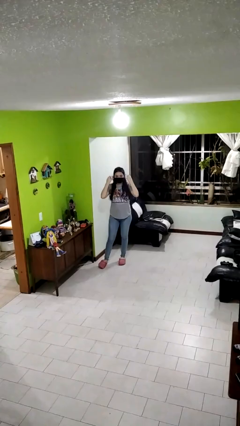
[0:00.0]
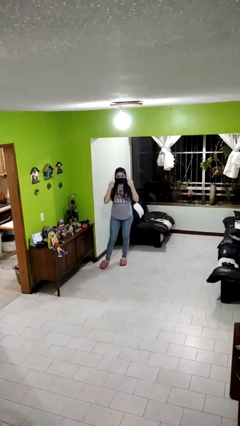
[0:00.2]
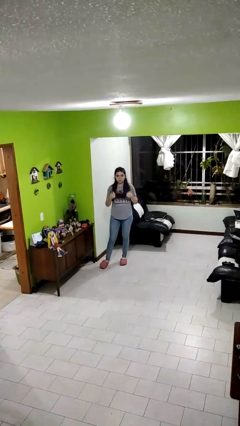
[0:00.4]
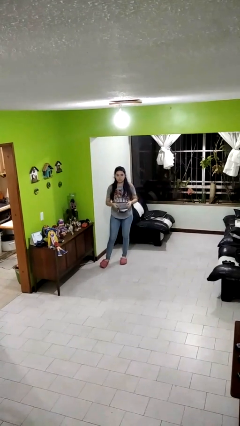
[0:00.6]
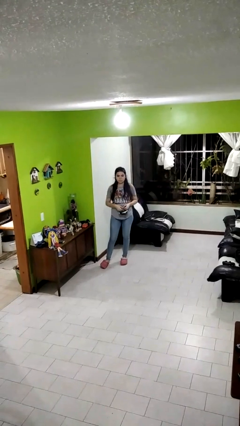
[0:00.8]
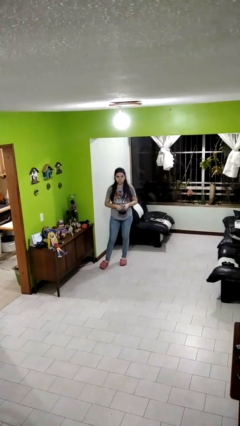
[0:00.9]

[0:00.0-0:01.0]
person takes off facemask

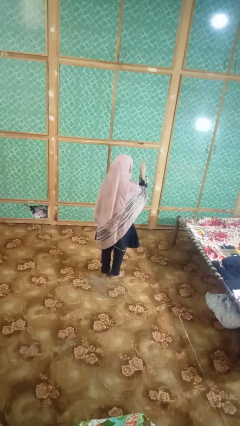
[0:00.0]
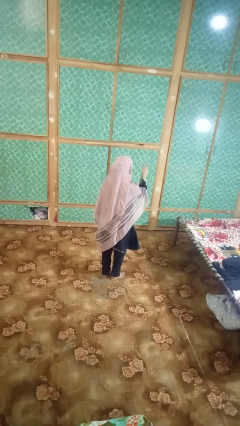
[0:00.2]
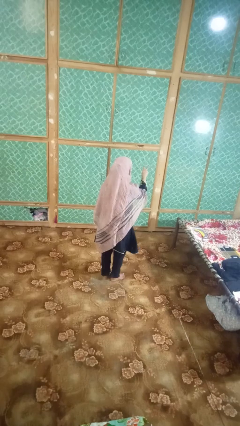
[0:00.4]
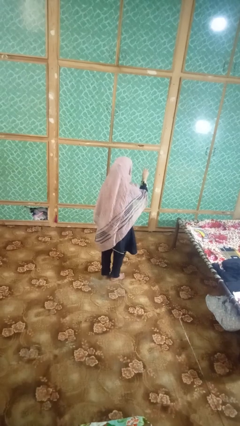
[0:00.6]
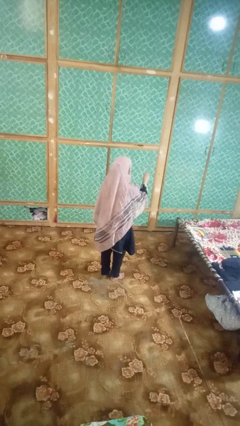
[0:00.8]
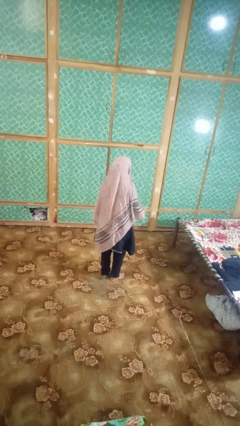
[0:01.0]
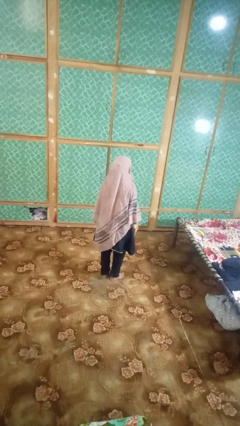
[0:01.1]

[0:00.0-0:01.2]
person gestures behind me

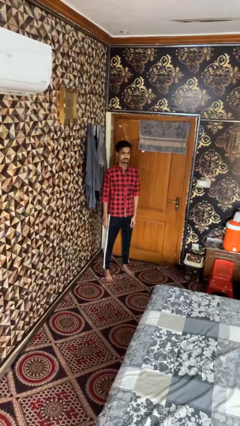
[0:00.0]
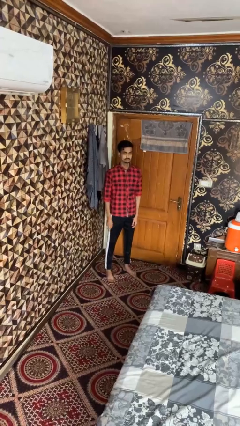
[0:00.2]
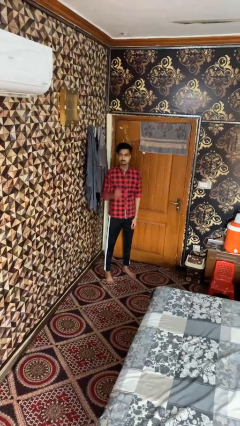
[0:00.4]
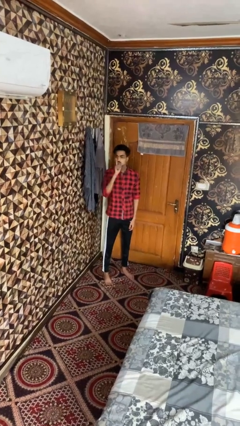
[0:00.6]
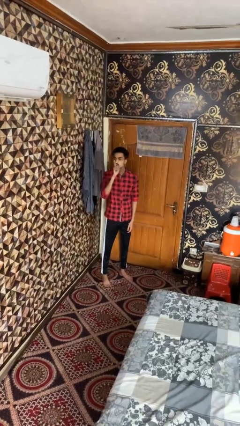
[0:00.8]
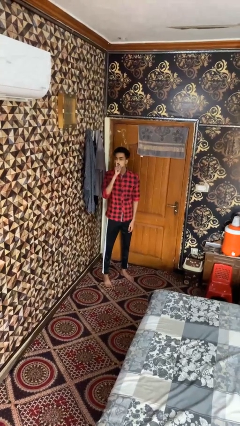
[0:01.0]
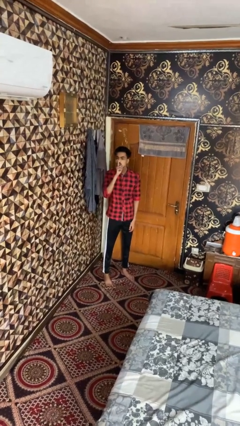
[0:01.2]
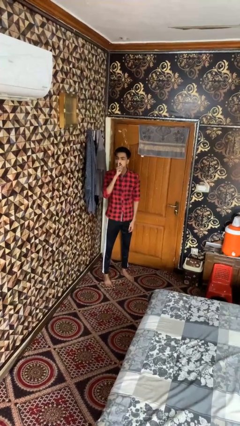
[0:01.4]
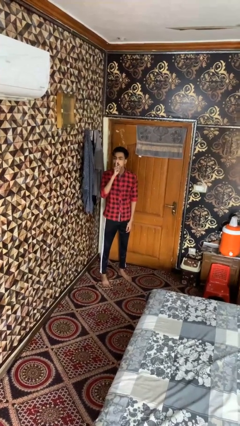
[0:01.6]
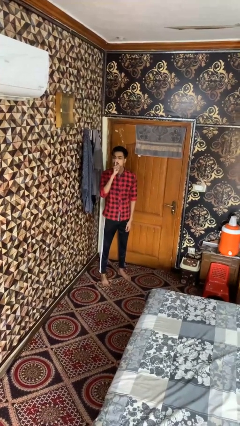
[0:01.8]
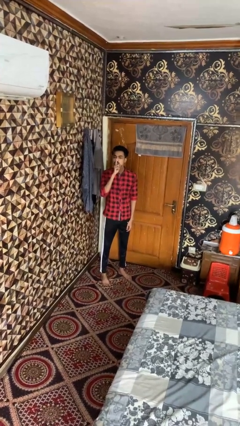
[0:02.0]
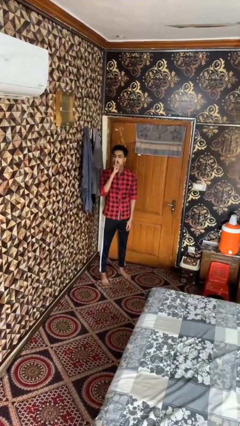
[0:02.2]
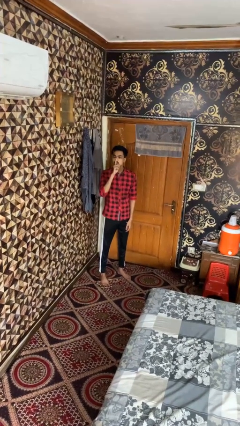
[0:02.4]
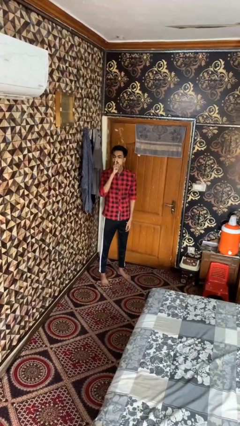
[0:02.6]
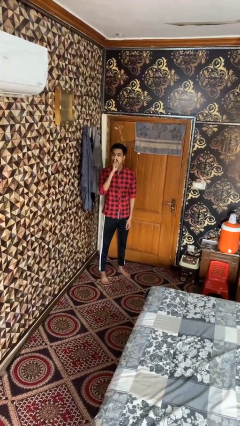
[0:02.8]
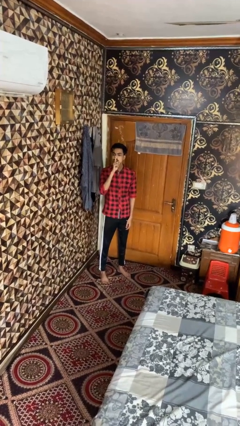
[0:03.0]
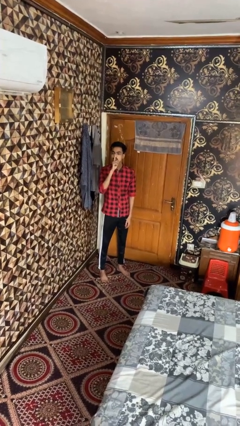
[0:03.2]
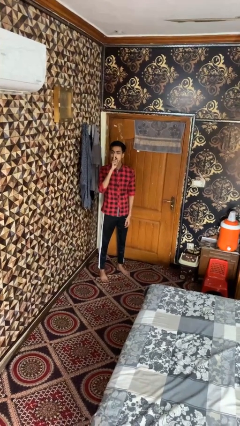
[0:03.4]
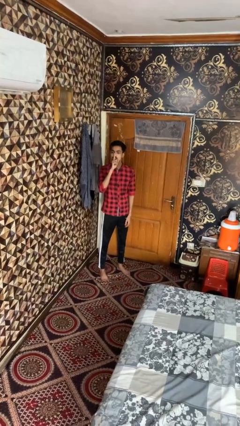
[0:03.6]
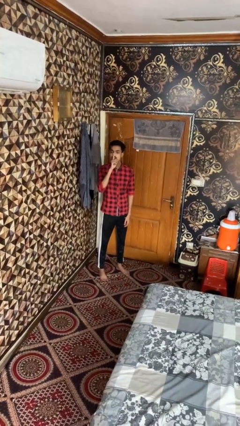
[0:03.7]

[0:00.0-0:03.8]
person gestures be quiet

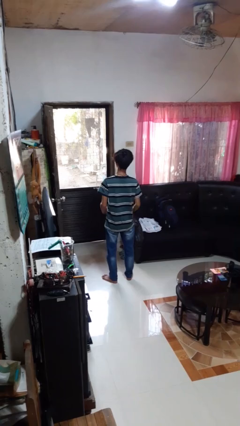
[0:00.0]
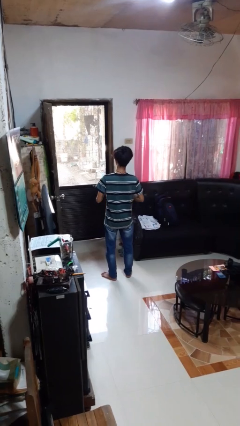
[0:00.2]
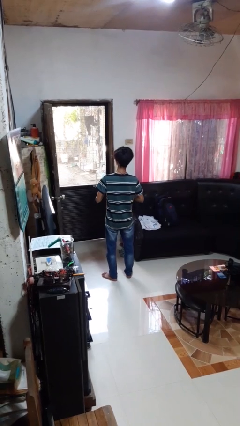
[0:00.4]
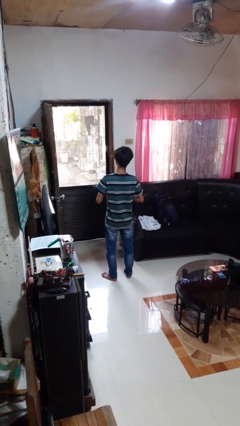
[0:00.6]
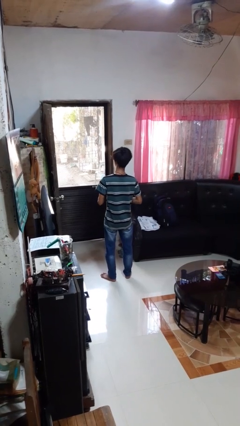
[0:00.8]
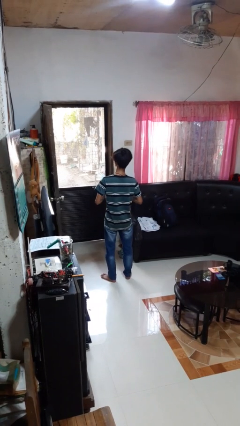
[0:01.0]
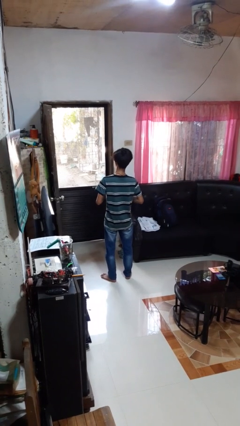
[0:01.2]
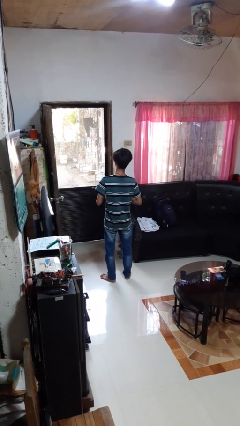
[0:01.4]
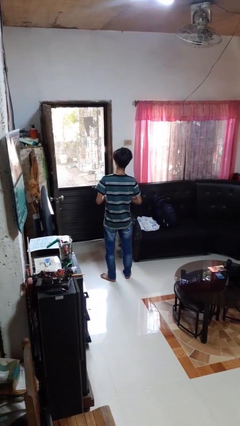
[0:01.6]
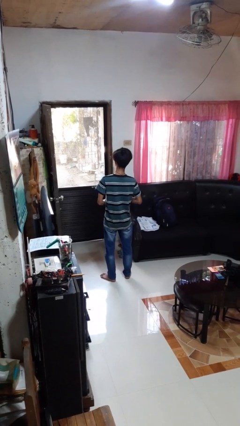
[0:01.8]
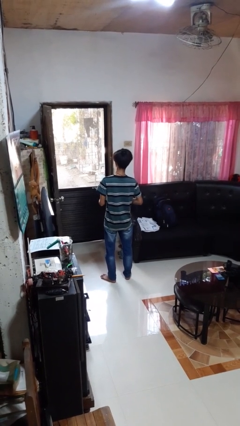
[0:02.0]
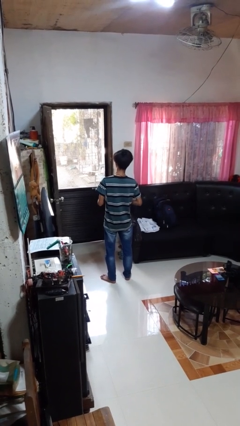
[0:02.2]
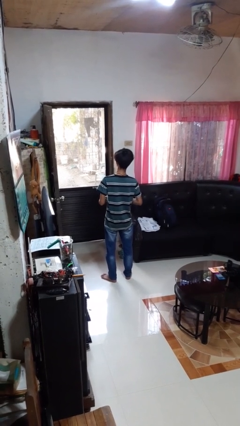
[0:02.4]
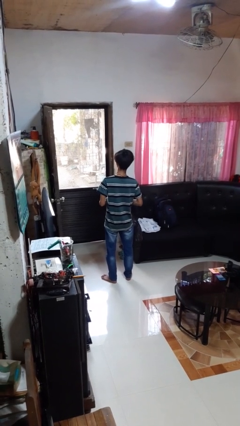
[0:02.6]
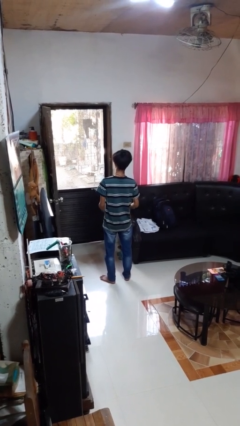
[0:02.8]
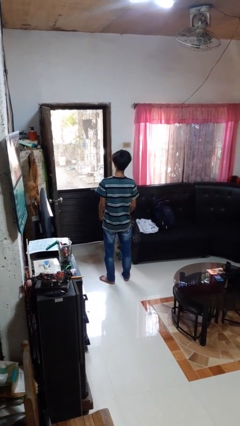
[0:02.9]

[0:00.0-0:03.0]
person buttons shirt

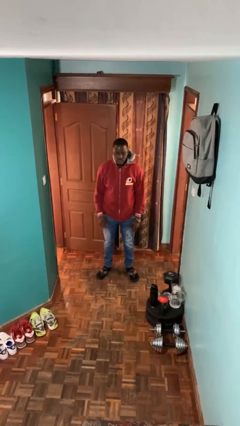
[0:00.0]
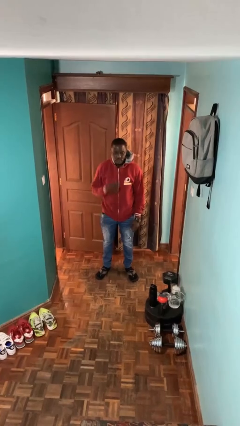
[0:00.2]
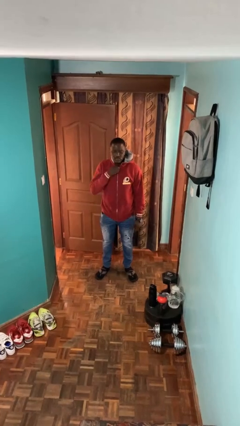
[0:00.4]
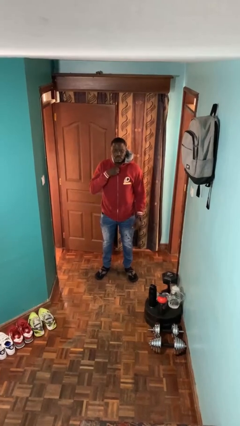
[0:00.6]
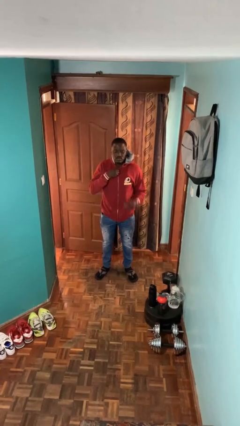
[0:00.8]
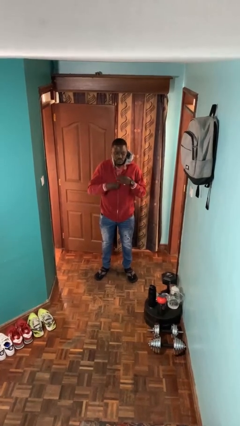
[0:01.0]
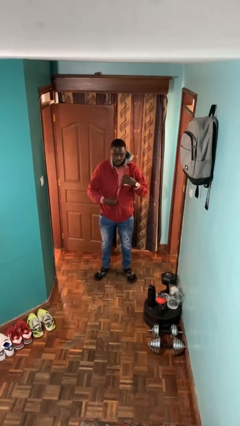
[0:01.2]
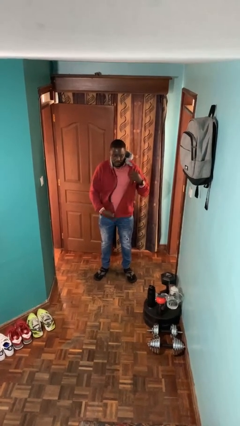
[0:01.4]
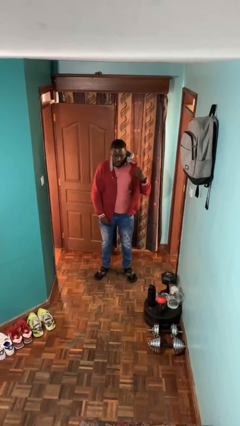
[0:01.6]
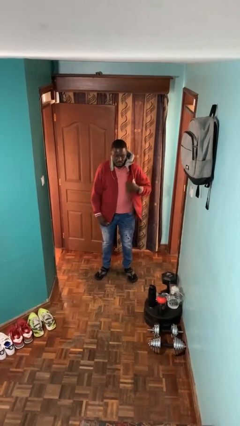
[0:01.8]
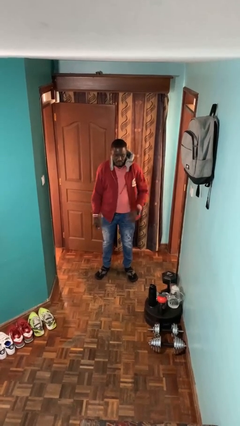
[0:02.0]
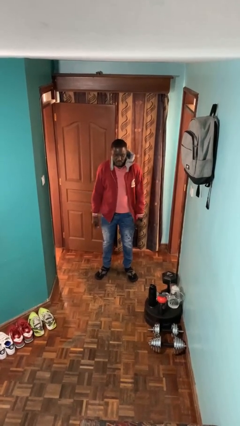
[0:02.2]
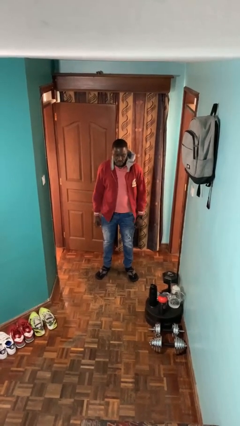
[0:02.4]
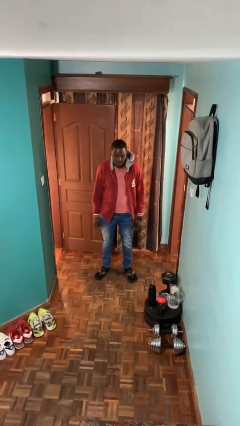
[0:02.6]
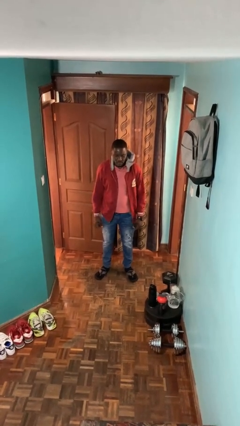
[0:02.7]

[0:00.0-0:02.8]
person unzips jacket

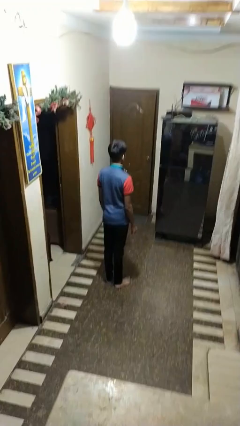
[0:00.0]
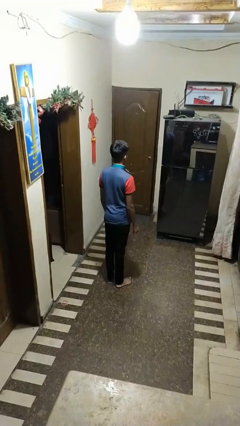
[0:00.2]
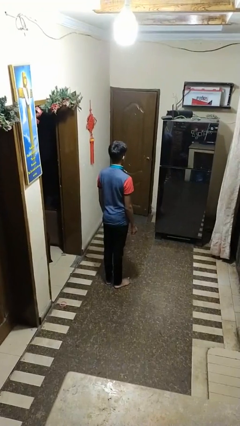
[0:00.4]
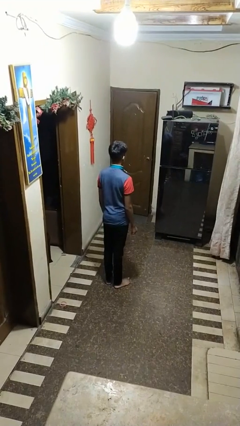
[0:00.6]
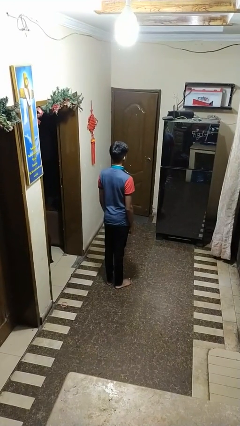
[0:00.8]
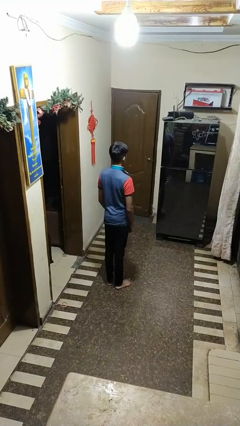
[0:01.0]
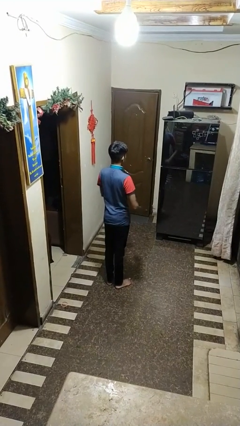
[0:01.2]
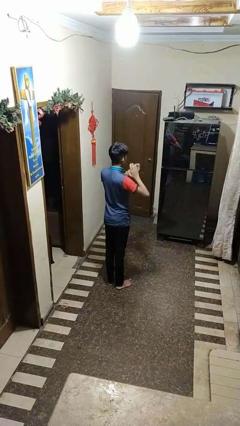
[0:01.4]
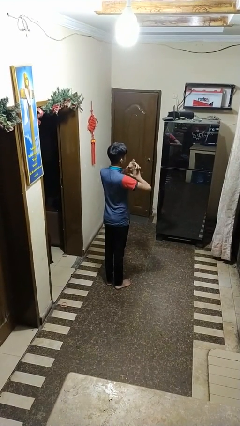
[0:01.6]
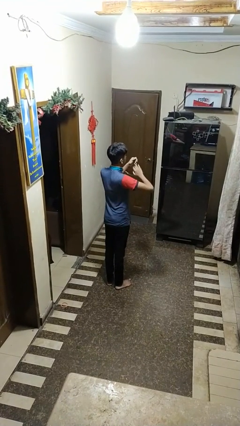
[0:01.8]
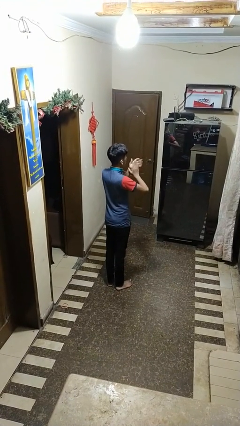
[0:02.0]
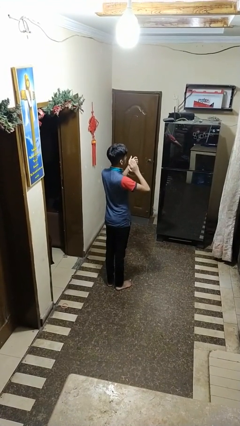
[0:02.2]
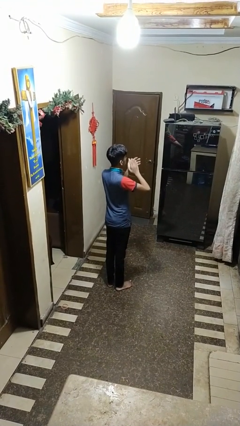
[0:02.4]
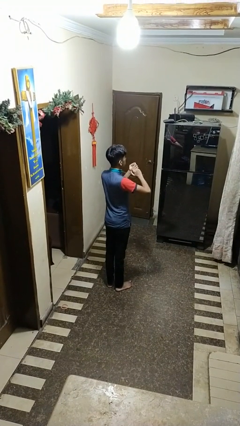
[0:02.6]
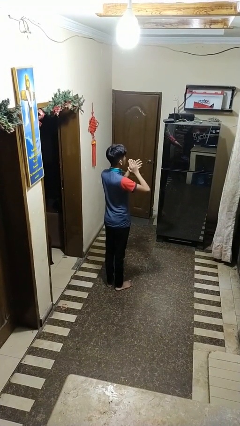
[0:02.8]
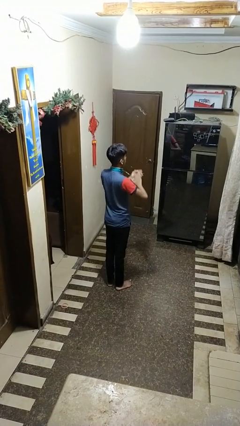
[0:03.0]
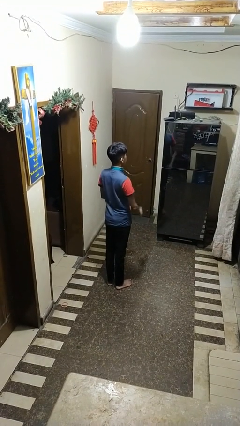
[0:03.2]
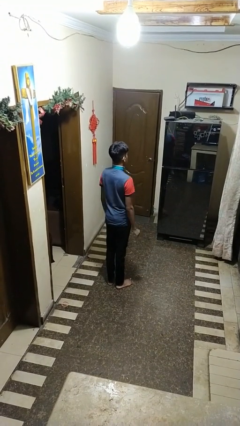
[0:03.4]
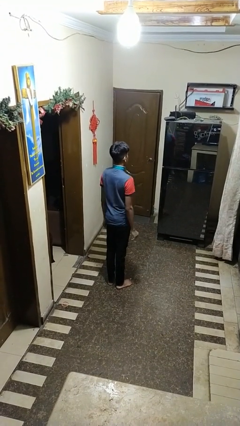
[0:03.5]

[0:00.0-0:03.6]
person claps hands

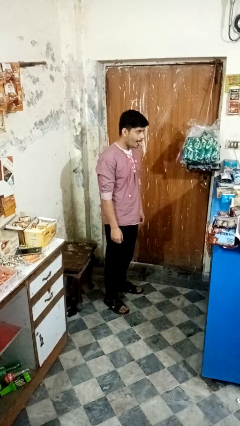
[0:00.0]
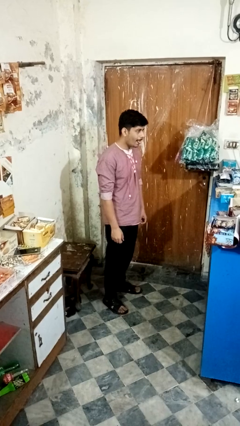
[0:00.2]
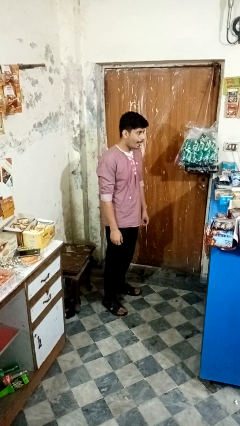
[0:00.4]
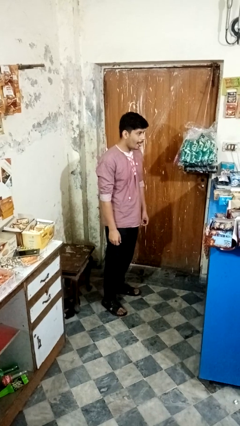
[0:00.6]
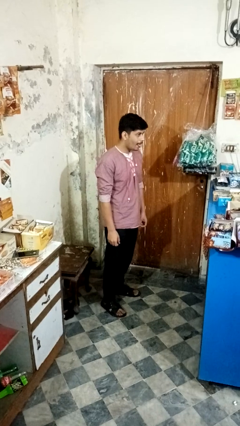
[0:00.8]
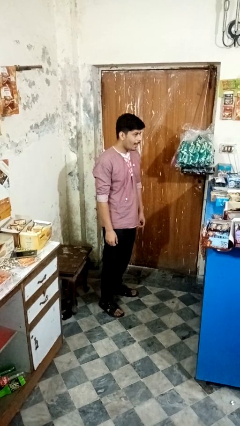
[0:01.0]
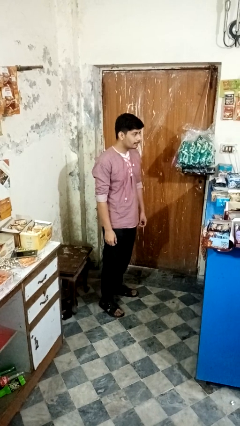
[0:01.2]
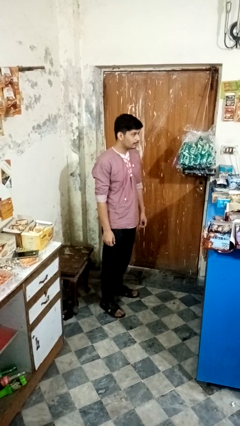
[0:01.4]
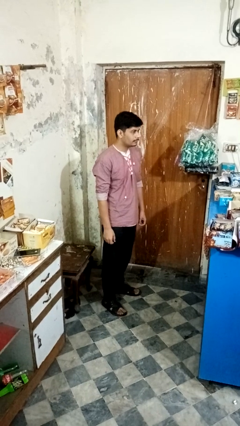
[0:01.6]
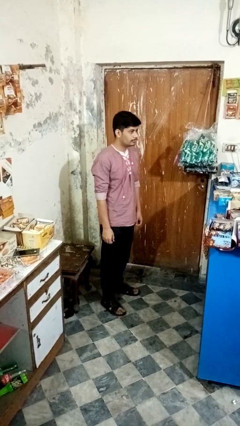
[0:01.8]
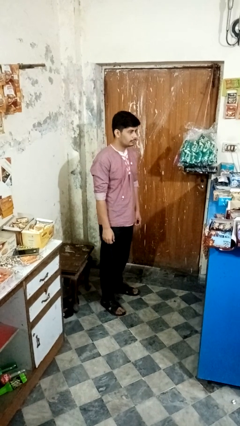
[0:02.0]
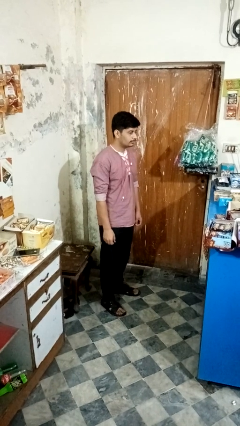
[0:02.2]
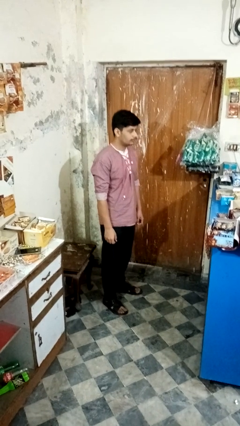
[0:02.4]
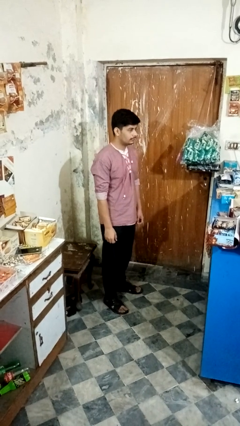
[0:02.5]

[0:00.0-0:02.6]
person sticks out tongue
